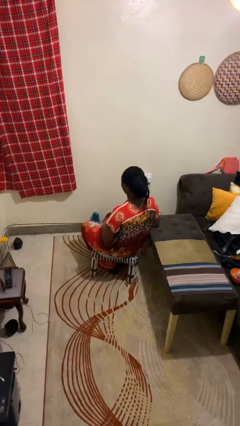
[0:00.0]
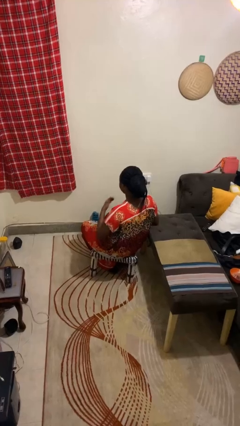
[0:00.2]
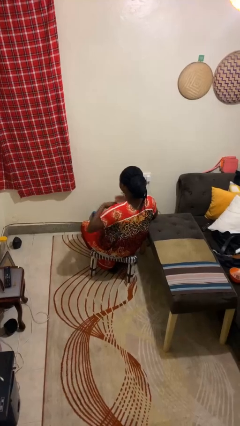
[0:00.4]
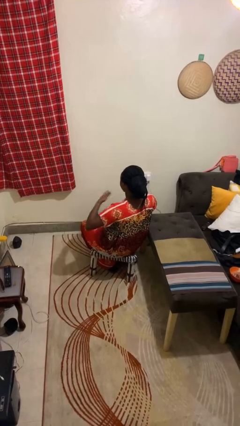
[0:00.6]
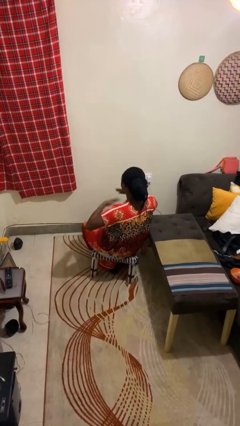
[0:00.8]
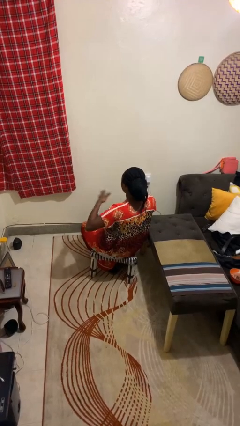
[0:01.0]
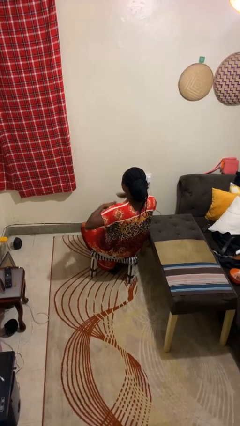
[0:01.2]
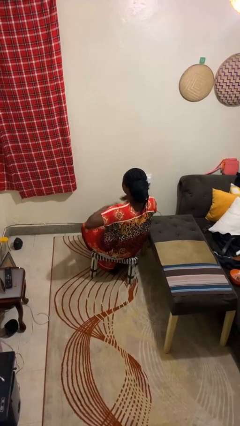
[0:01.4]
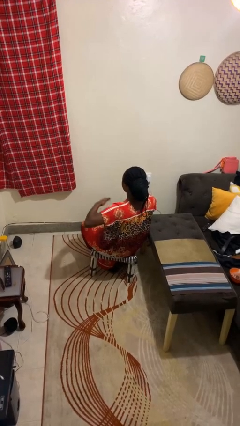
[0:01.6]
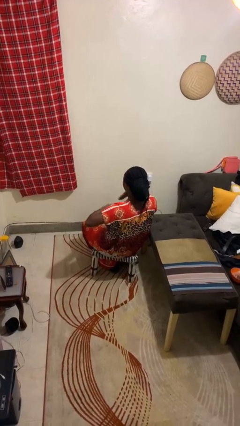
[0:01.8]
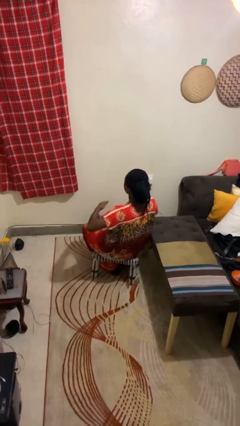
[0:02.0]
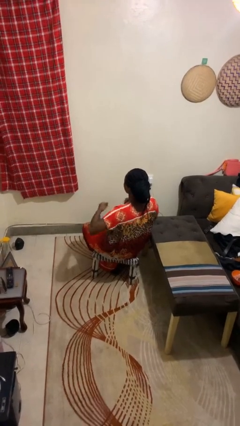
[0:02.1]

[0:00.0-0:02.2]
person drums on chest

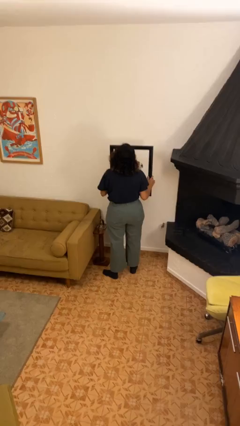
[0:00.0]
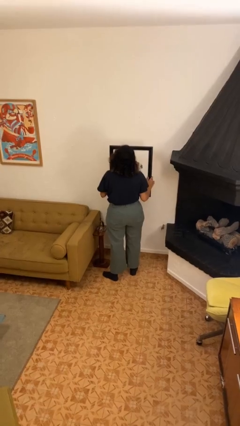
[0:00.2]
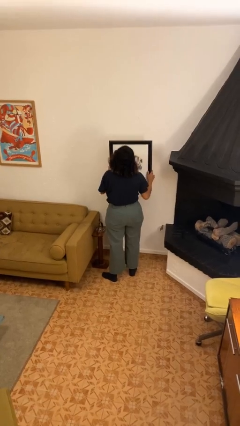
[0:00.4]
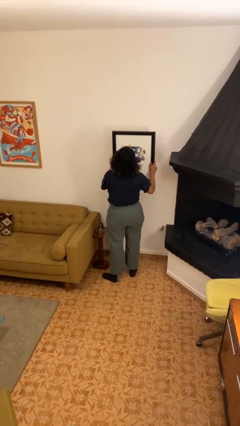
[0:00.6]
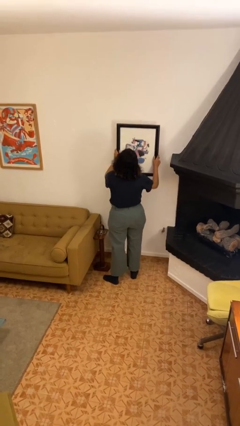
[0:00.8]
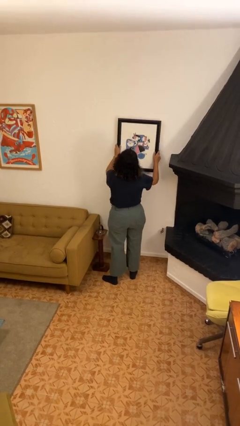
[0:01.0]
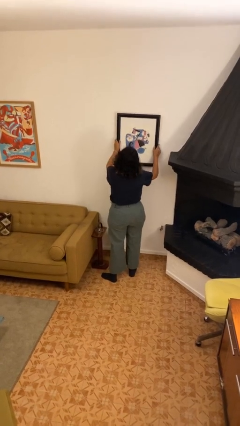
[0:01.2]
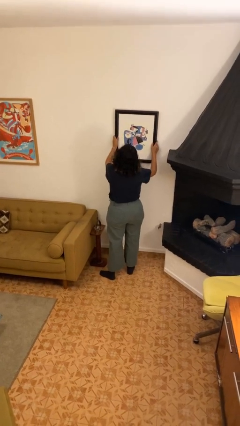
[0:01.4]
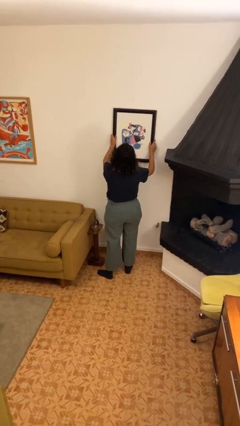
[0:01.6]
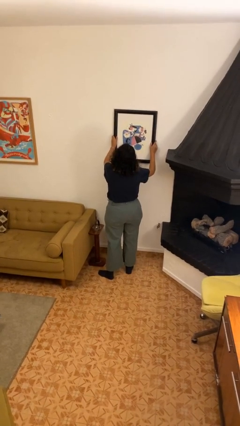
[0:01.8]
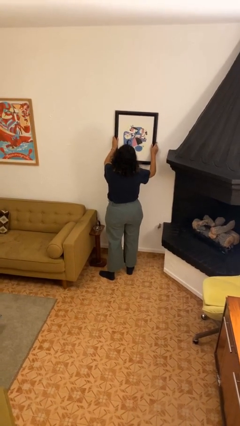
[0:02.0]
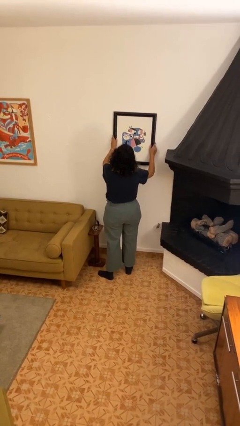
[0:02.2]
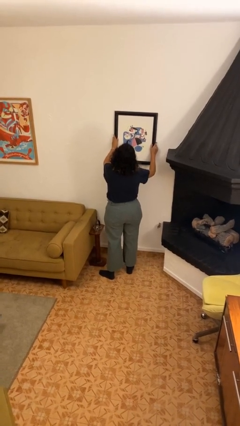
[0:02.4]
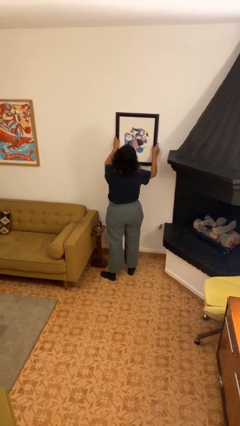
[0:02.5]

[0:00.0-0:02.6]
person puts up picture frame

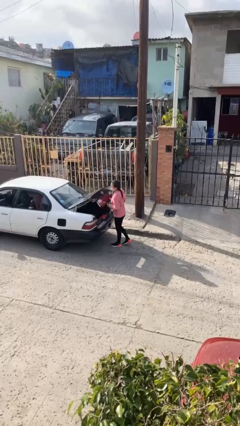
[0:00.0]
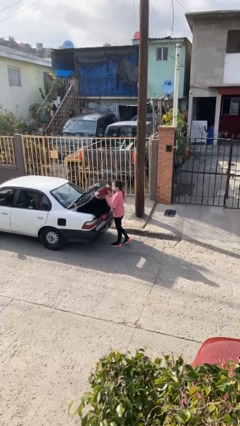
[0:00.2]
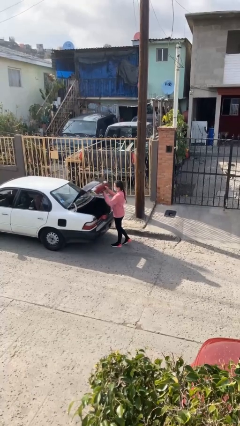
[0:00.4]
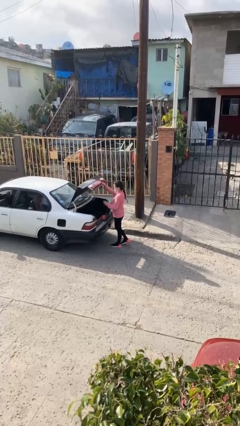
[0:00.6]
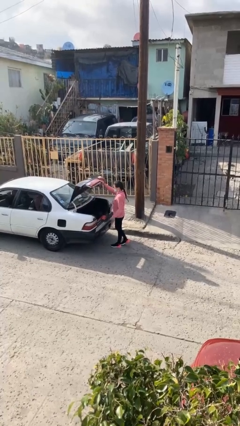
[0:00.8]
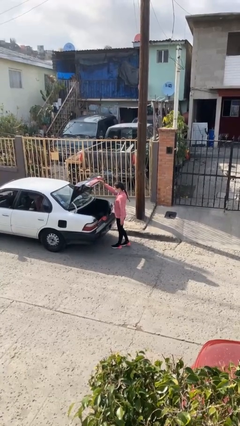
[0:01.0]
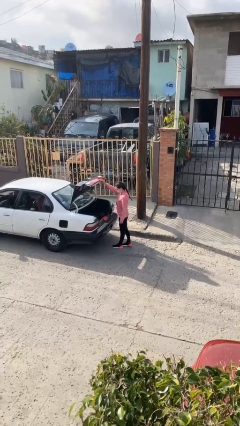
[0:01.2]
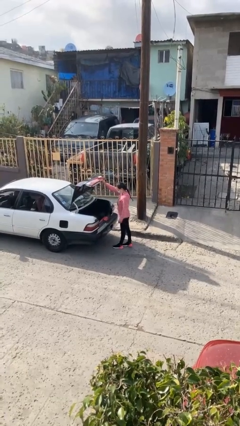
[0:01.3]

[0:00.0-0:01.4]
person opens car trunk

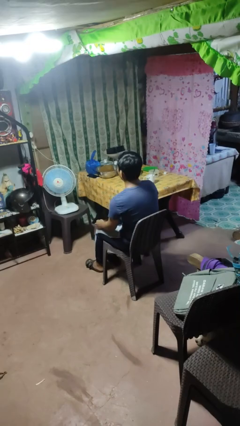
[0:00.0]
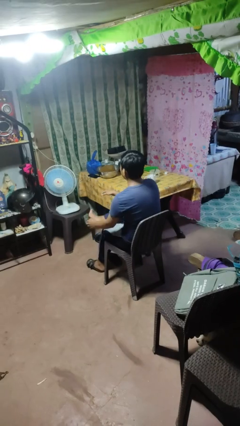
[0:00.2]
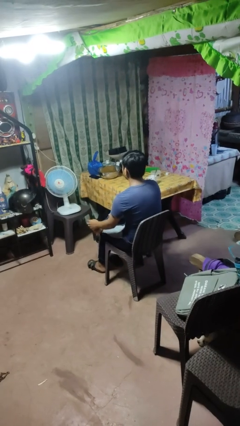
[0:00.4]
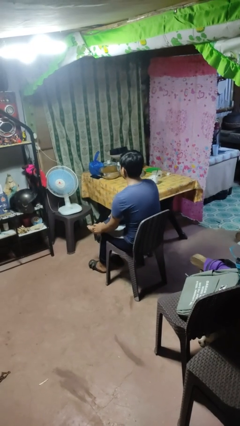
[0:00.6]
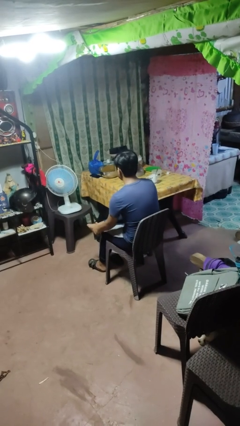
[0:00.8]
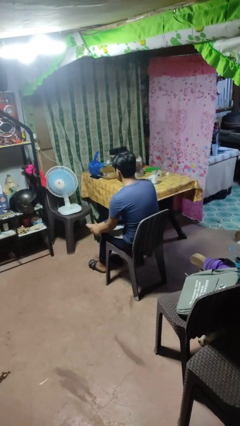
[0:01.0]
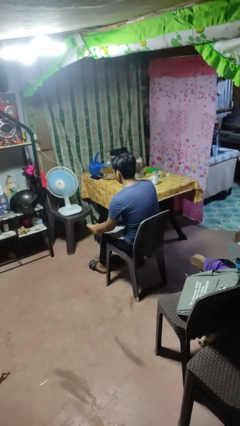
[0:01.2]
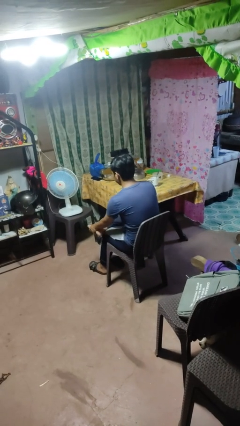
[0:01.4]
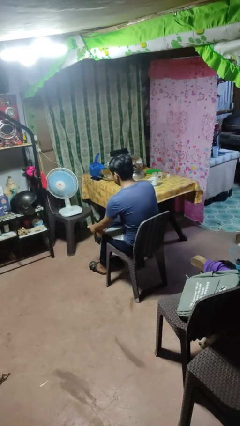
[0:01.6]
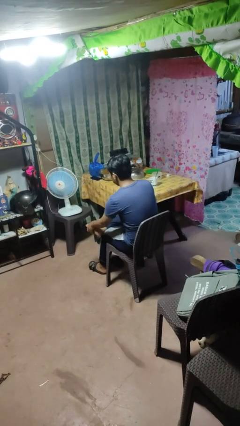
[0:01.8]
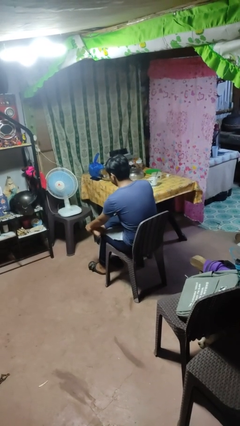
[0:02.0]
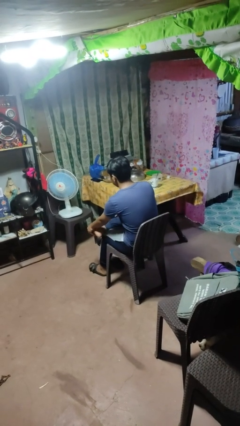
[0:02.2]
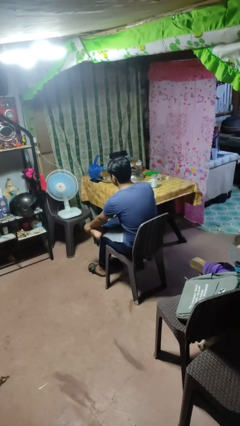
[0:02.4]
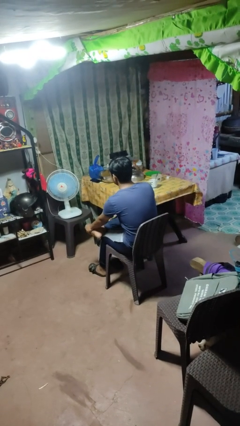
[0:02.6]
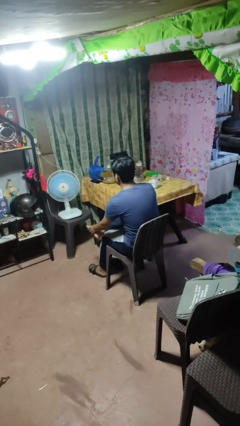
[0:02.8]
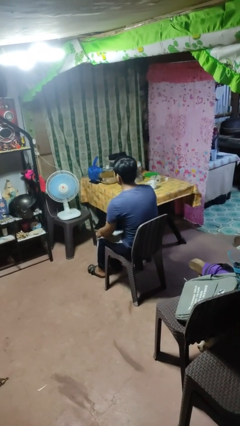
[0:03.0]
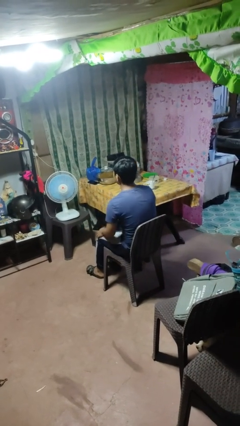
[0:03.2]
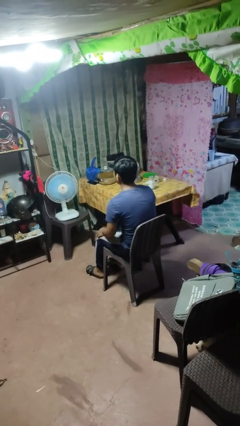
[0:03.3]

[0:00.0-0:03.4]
person rubs foot

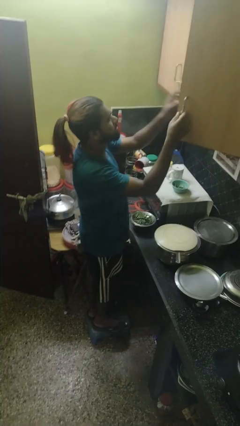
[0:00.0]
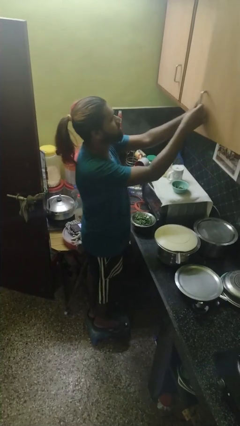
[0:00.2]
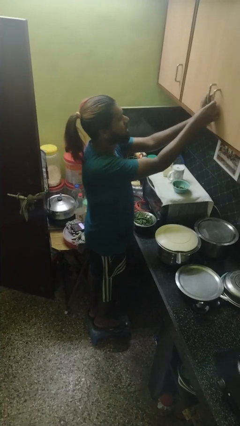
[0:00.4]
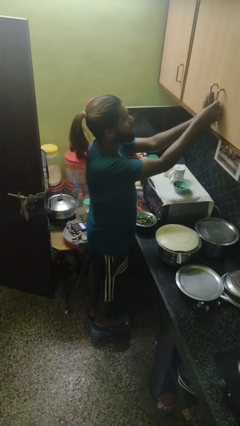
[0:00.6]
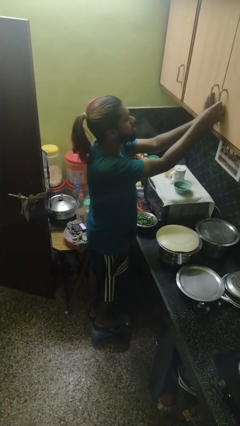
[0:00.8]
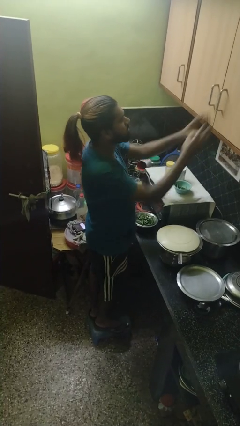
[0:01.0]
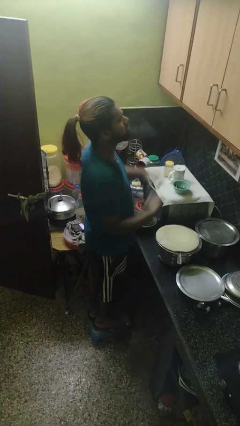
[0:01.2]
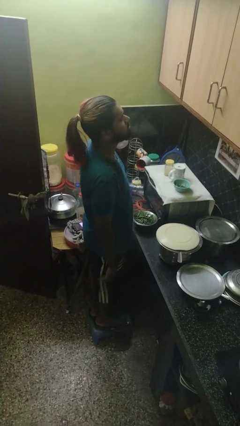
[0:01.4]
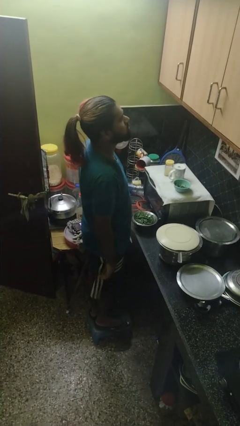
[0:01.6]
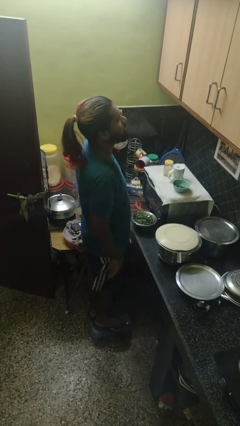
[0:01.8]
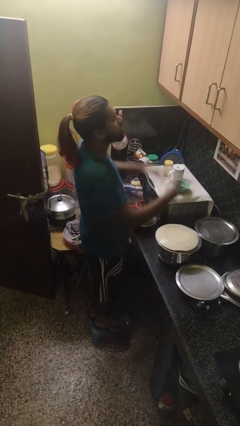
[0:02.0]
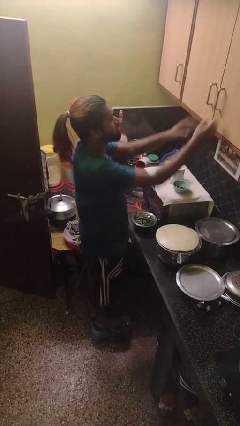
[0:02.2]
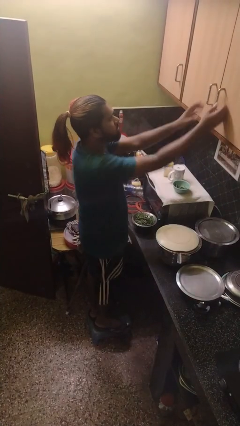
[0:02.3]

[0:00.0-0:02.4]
person closes cabinet

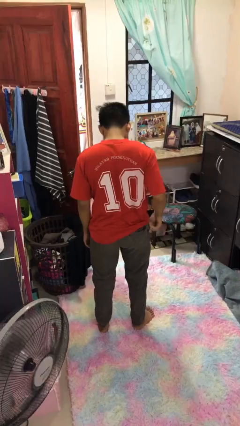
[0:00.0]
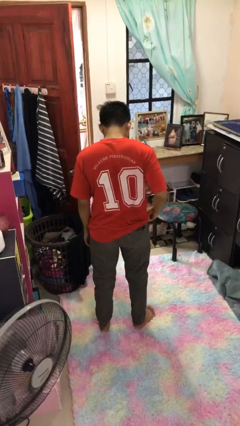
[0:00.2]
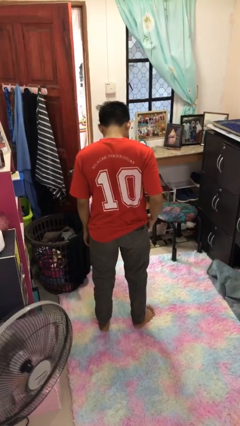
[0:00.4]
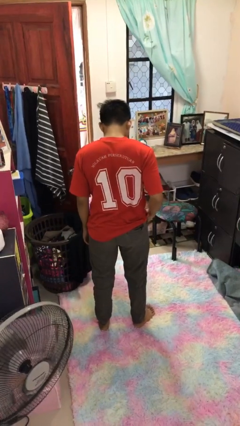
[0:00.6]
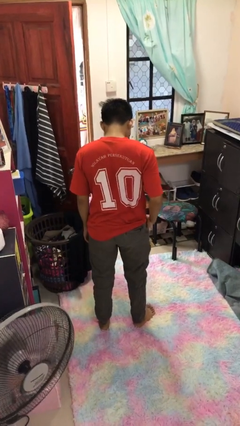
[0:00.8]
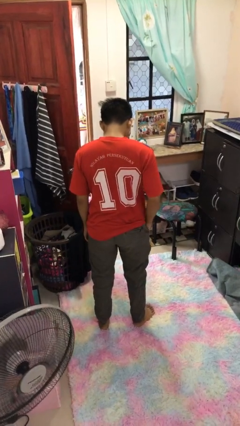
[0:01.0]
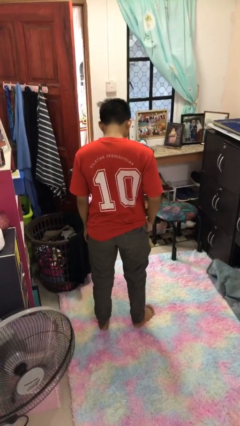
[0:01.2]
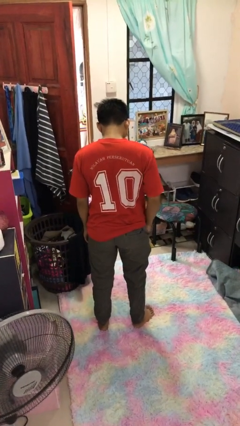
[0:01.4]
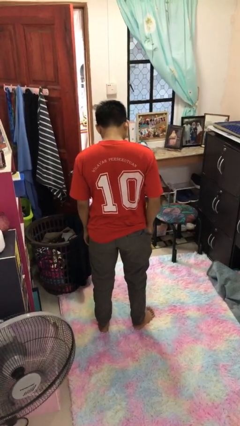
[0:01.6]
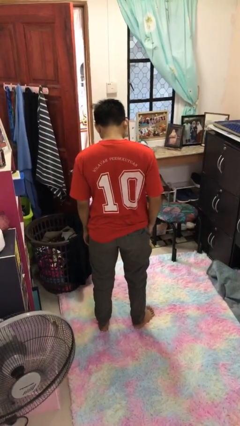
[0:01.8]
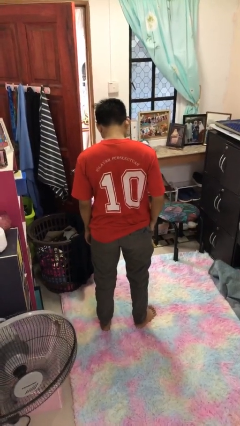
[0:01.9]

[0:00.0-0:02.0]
person puts hands in back pockets

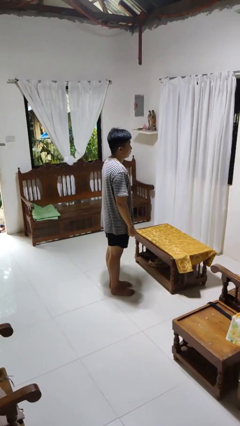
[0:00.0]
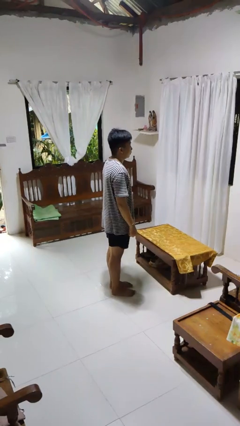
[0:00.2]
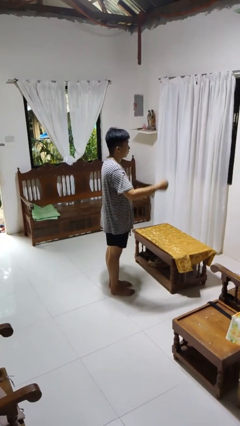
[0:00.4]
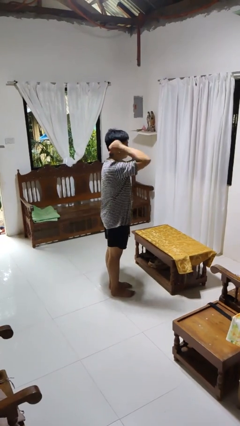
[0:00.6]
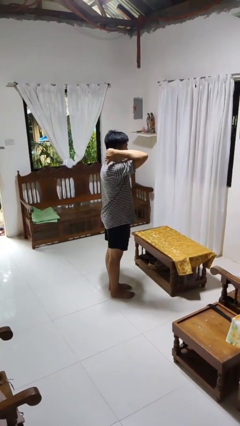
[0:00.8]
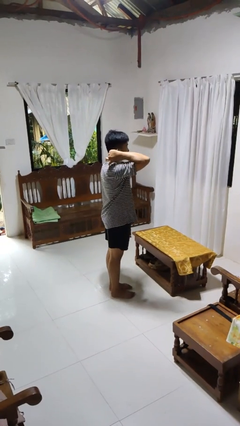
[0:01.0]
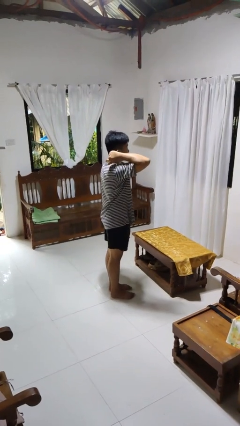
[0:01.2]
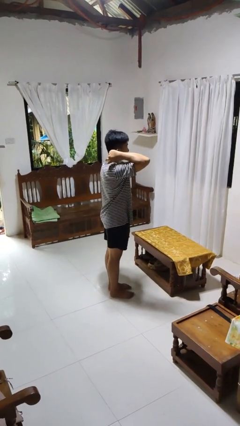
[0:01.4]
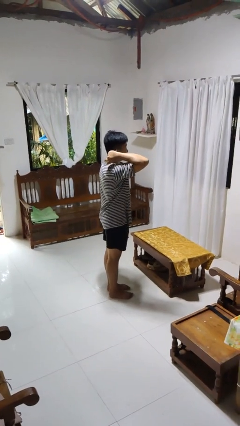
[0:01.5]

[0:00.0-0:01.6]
person gestures behind me

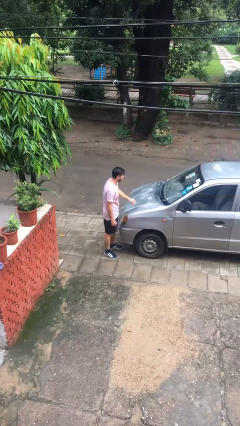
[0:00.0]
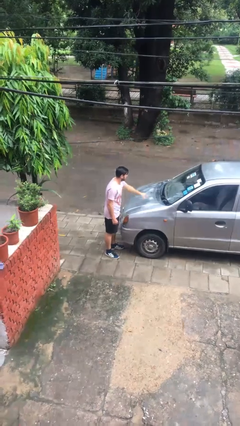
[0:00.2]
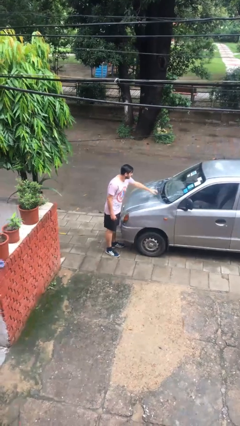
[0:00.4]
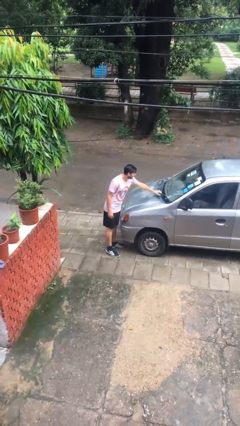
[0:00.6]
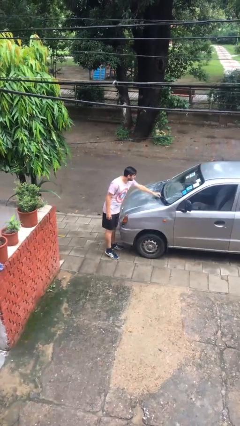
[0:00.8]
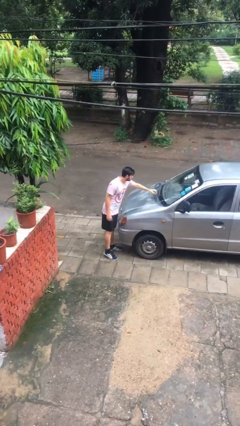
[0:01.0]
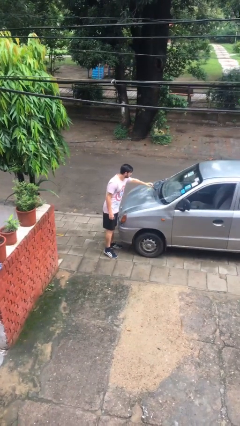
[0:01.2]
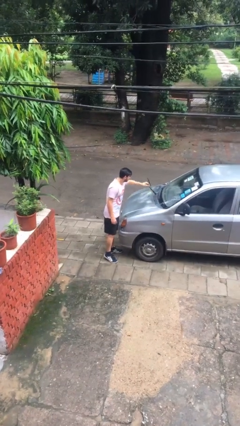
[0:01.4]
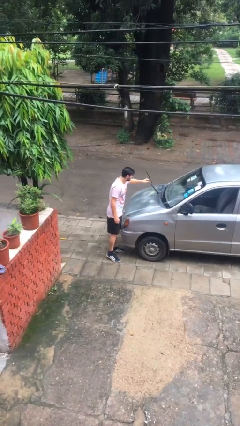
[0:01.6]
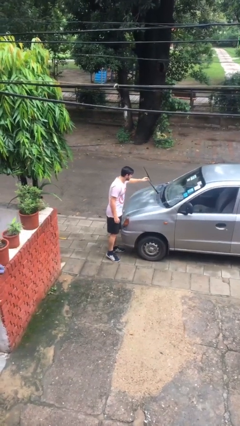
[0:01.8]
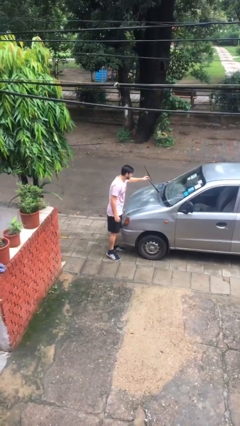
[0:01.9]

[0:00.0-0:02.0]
person flips up car wipers
